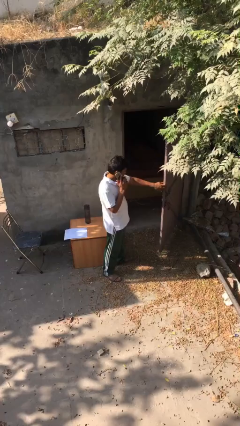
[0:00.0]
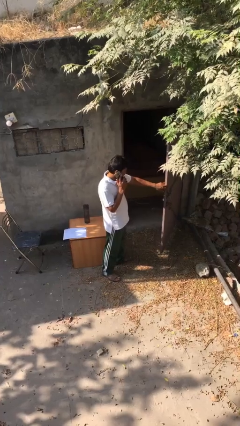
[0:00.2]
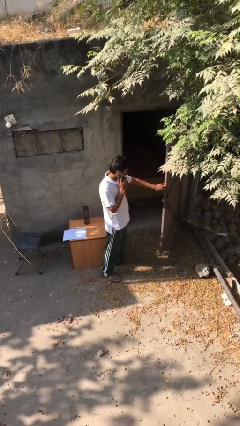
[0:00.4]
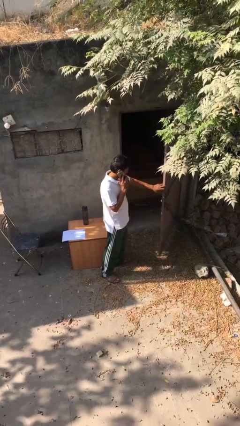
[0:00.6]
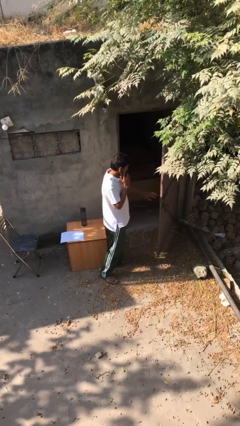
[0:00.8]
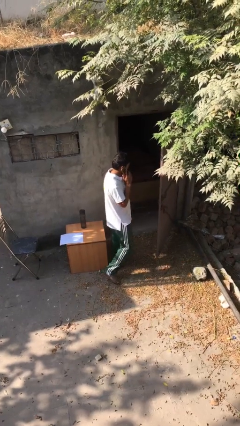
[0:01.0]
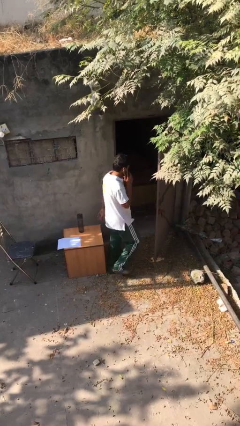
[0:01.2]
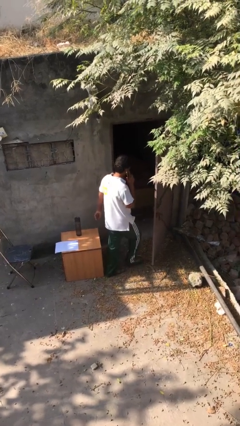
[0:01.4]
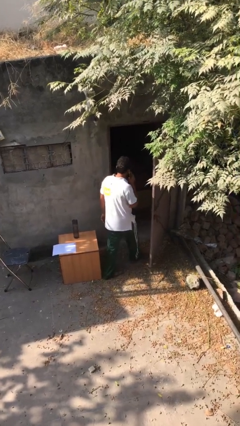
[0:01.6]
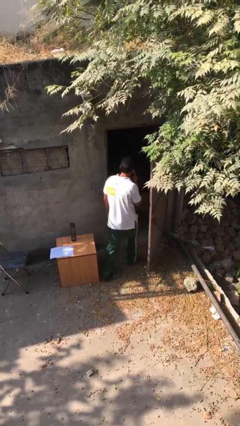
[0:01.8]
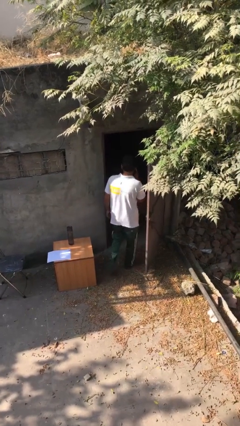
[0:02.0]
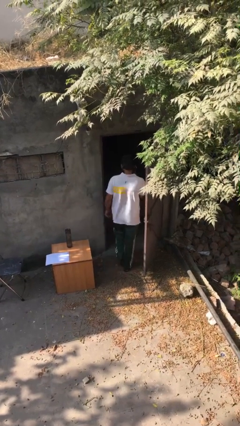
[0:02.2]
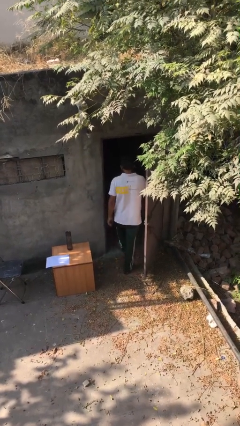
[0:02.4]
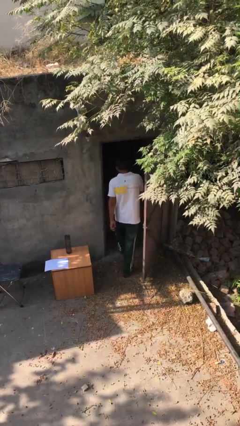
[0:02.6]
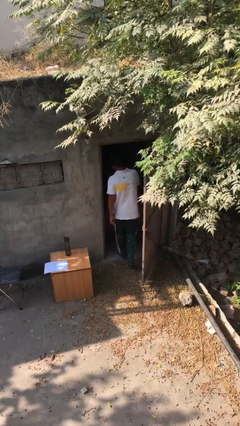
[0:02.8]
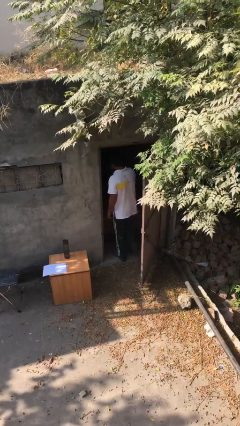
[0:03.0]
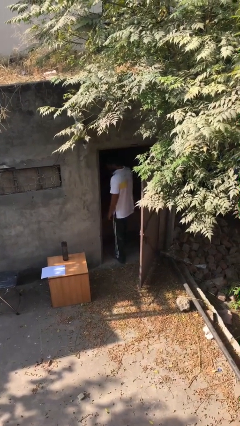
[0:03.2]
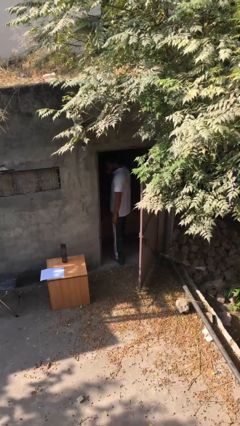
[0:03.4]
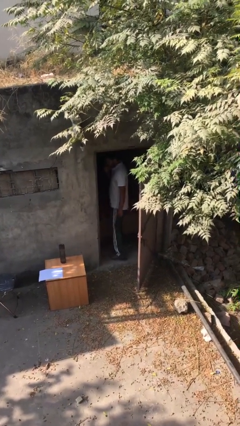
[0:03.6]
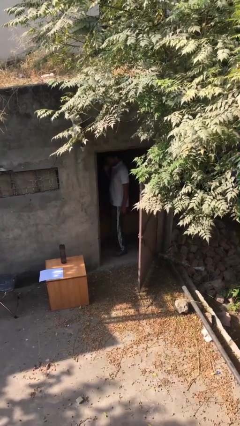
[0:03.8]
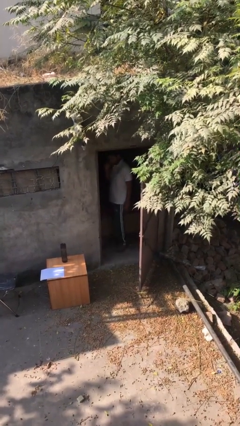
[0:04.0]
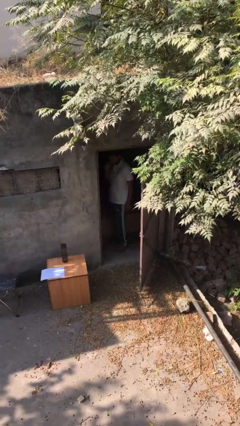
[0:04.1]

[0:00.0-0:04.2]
person exits scene through structure

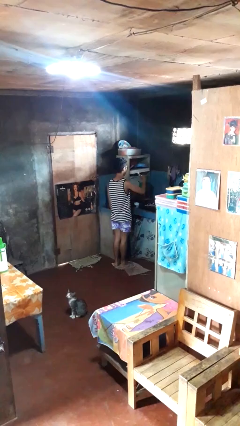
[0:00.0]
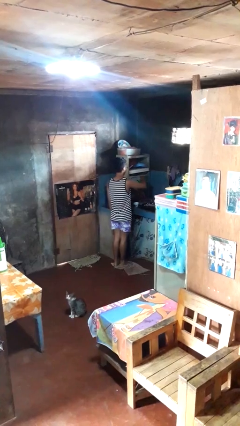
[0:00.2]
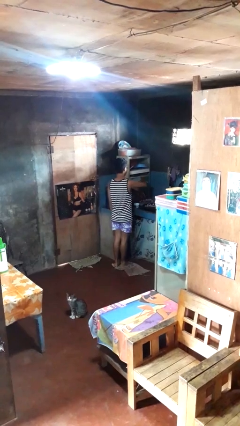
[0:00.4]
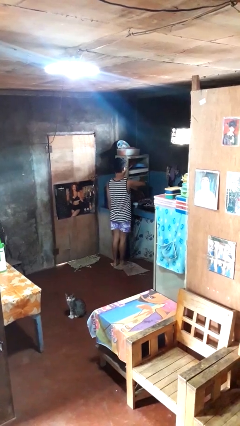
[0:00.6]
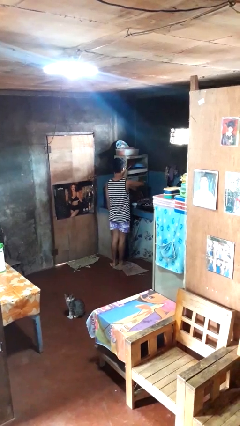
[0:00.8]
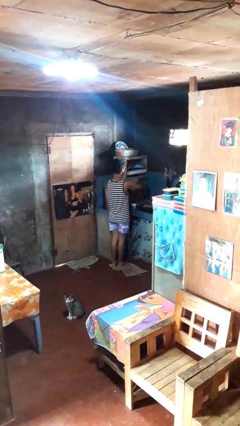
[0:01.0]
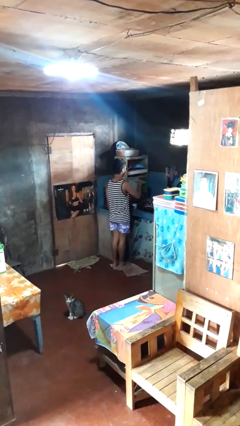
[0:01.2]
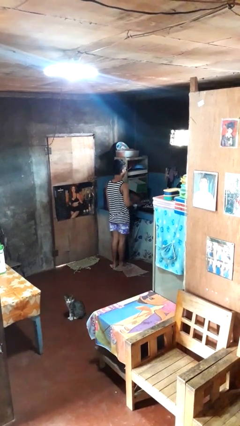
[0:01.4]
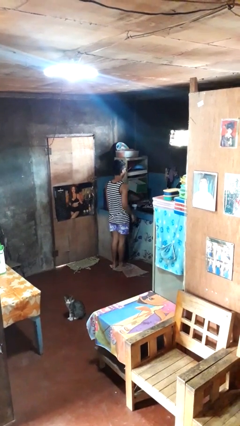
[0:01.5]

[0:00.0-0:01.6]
person puts object into kitchen drawer

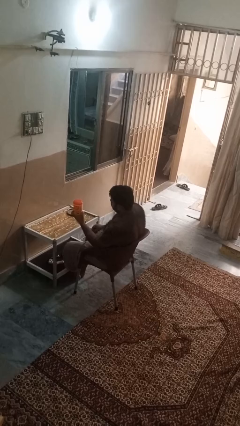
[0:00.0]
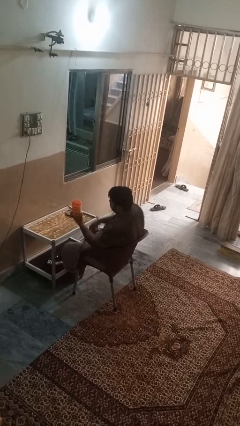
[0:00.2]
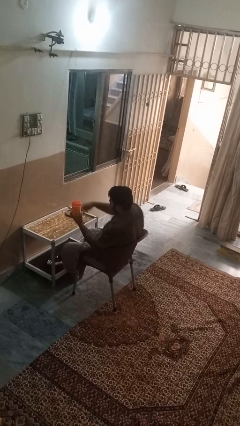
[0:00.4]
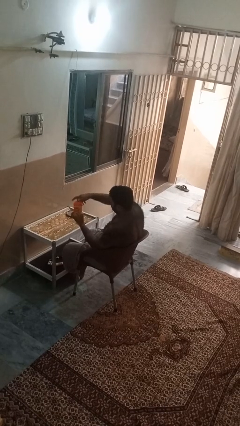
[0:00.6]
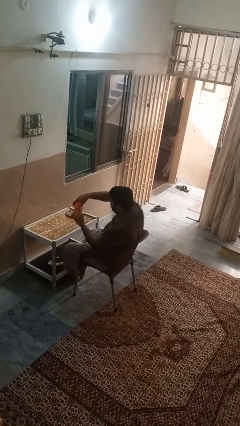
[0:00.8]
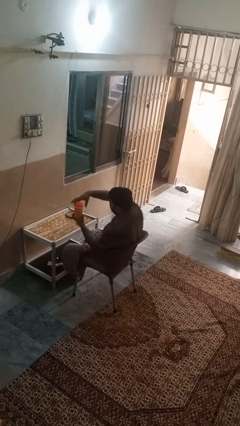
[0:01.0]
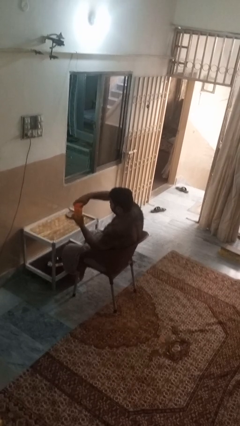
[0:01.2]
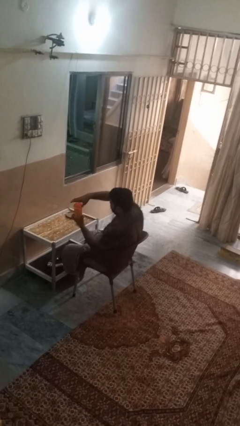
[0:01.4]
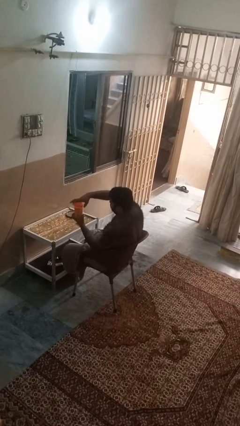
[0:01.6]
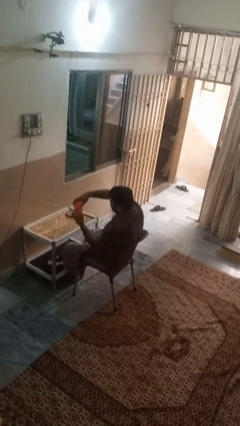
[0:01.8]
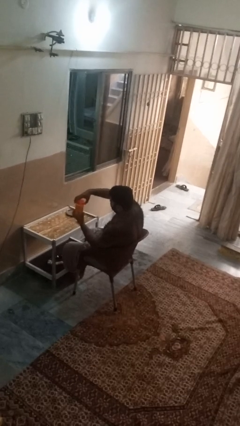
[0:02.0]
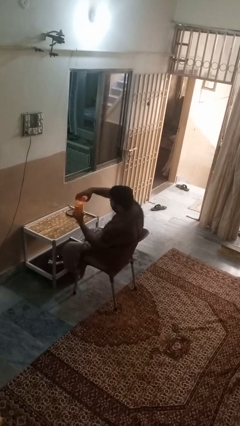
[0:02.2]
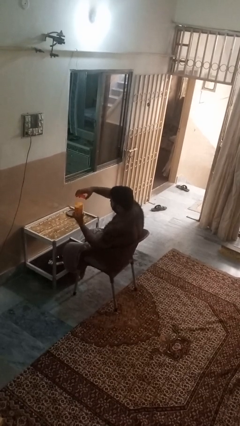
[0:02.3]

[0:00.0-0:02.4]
person opens jar

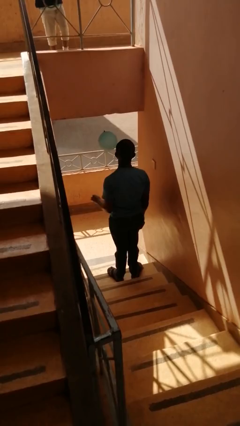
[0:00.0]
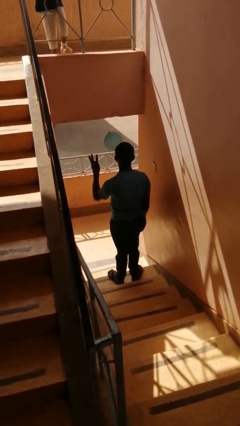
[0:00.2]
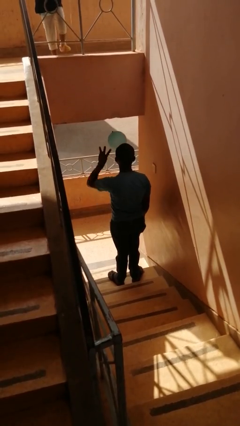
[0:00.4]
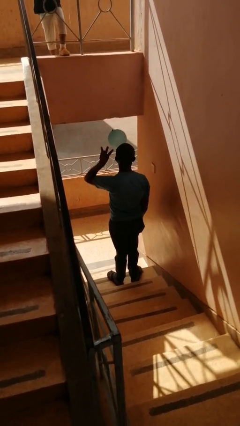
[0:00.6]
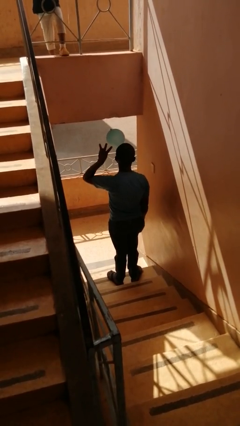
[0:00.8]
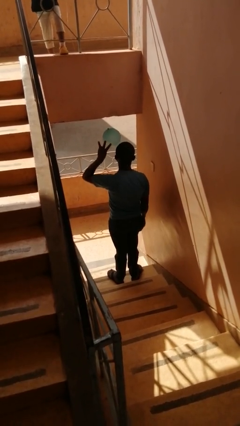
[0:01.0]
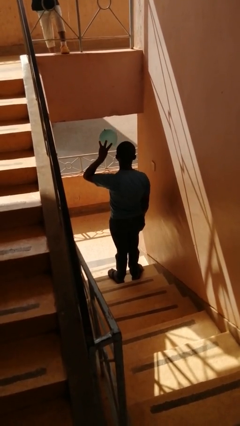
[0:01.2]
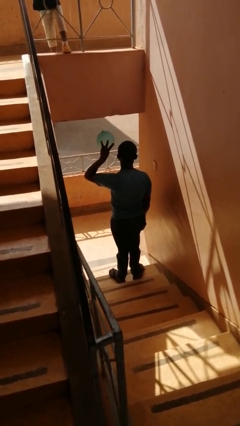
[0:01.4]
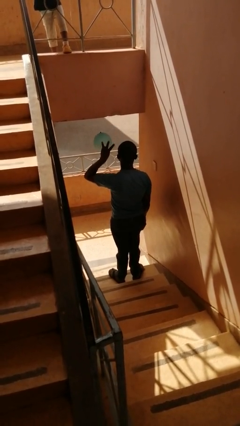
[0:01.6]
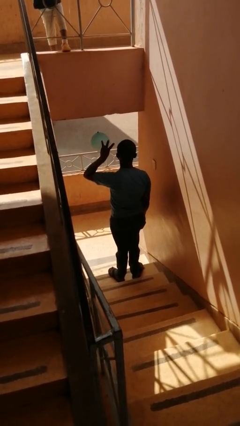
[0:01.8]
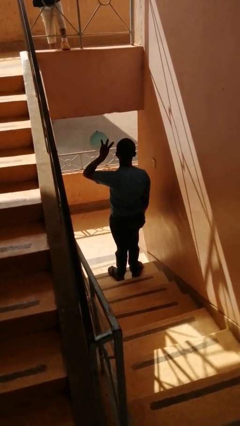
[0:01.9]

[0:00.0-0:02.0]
person gestures number three

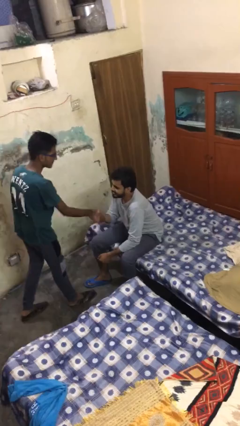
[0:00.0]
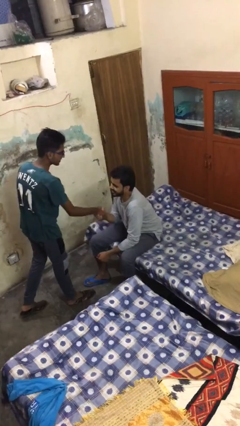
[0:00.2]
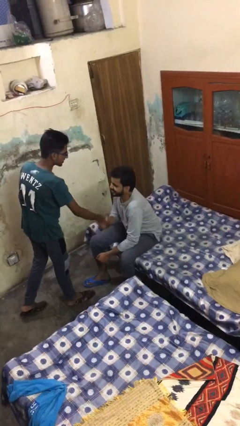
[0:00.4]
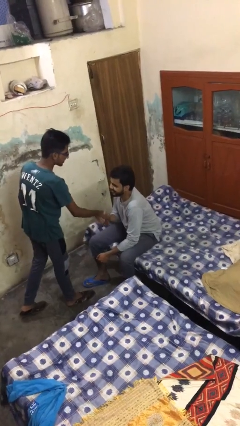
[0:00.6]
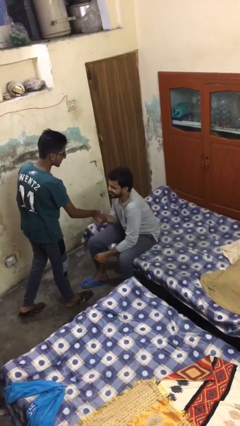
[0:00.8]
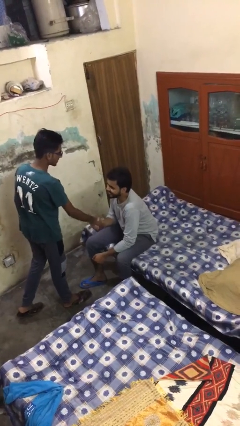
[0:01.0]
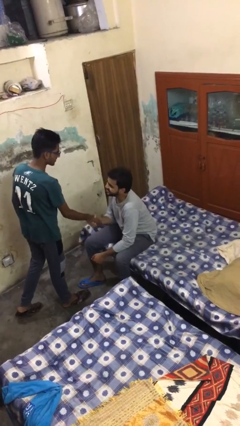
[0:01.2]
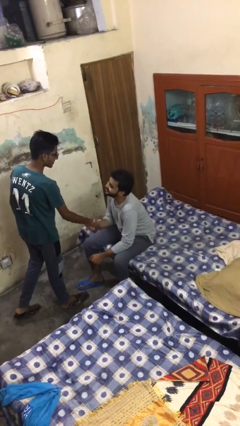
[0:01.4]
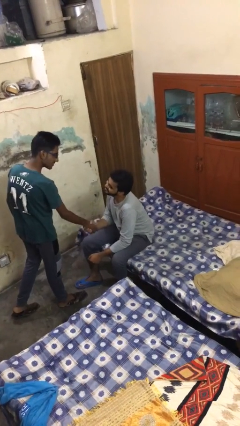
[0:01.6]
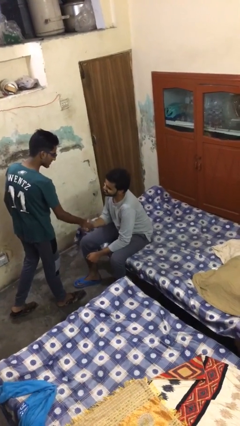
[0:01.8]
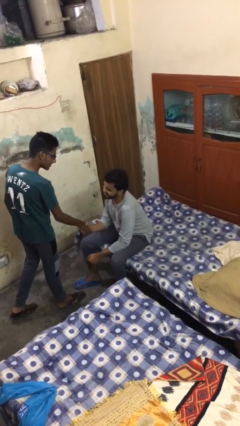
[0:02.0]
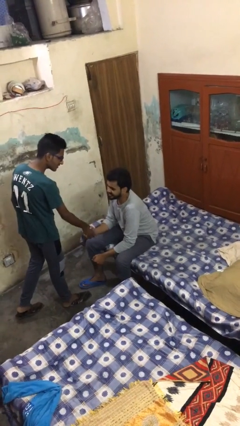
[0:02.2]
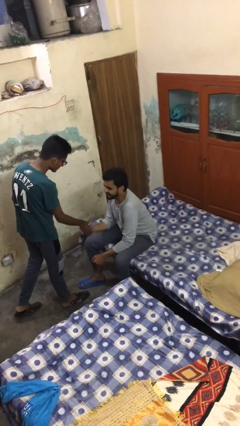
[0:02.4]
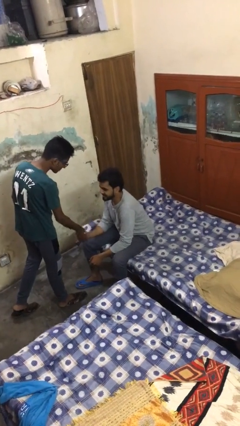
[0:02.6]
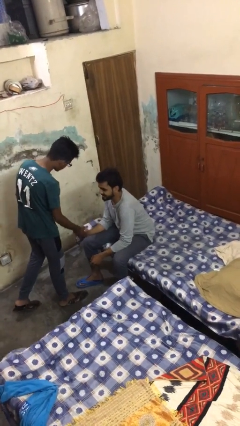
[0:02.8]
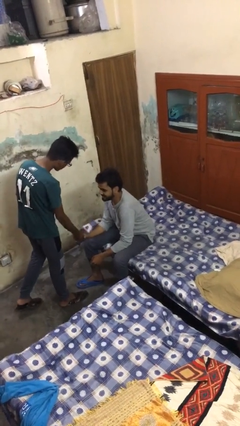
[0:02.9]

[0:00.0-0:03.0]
person shakes hand

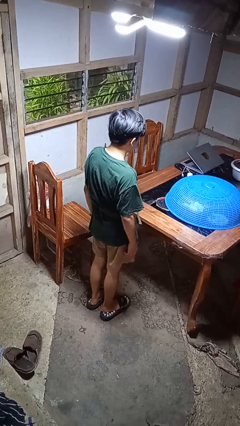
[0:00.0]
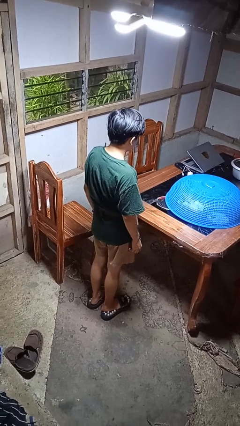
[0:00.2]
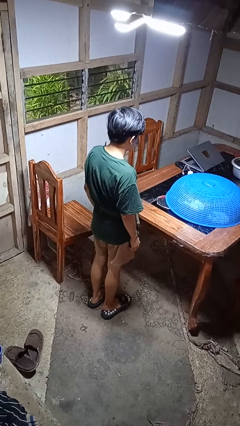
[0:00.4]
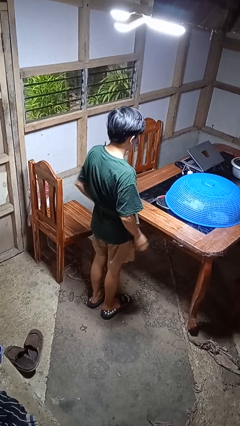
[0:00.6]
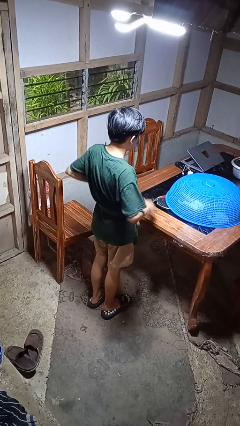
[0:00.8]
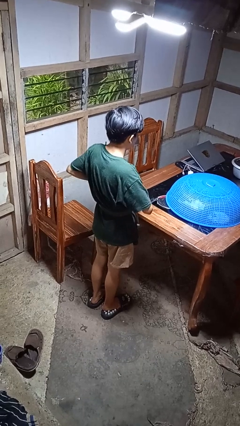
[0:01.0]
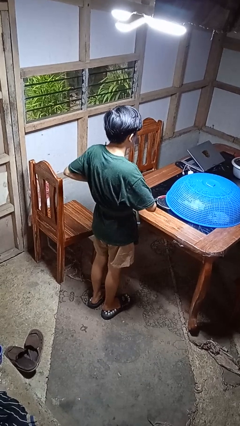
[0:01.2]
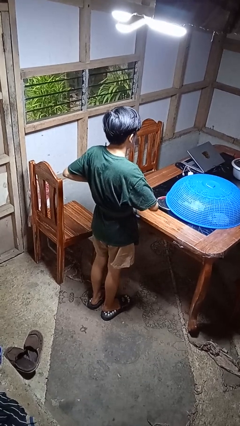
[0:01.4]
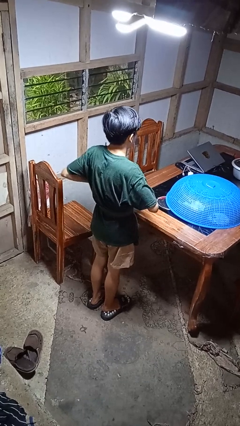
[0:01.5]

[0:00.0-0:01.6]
person takes off belt

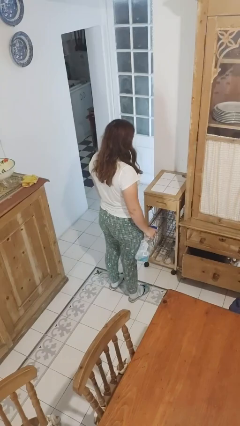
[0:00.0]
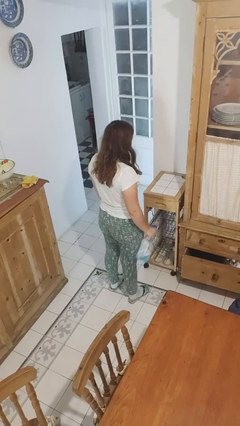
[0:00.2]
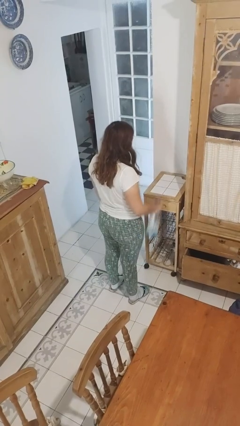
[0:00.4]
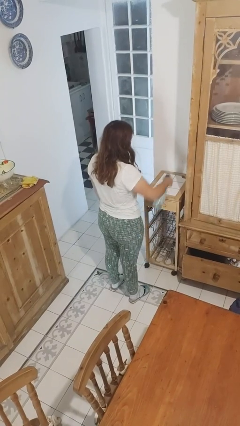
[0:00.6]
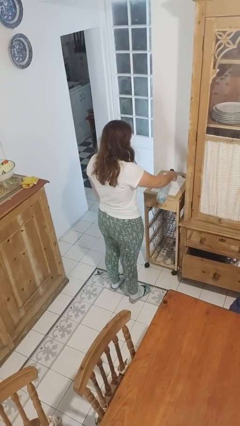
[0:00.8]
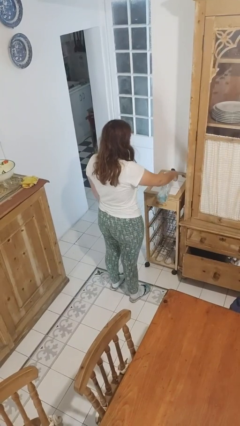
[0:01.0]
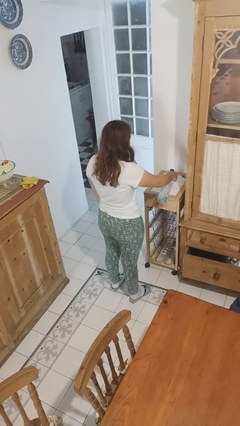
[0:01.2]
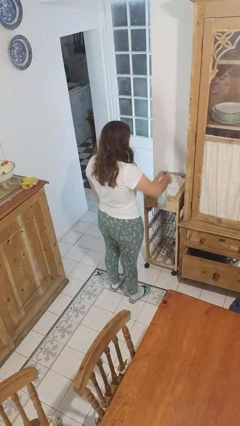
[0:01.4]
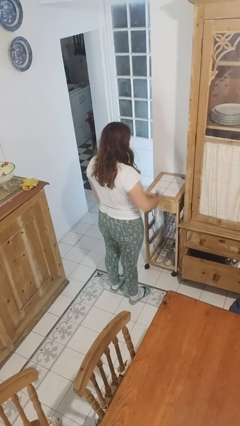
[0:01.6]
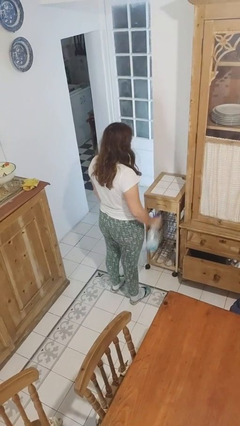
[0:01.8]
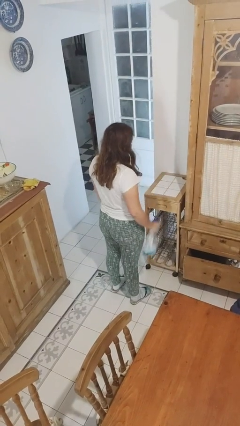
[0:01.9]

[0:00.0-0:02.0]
person sprays from bottle

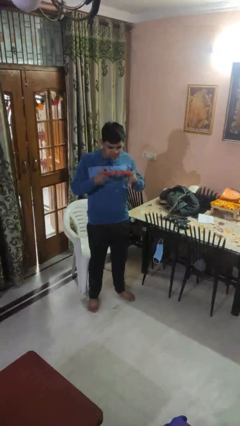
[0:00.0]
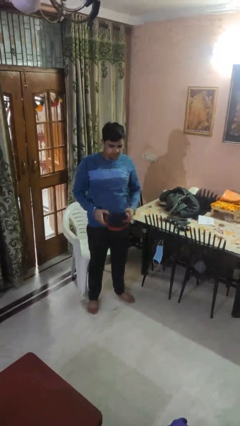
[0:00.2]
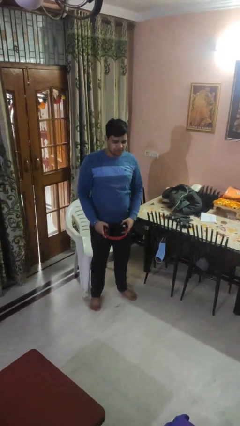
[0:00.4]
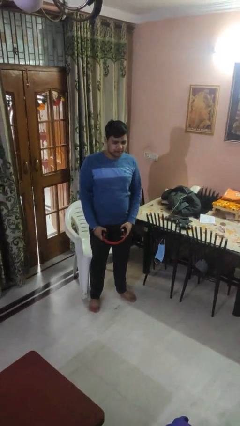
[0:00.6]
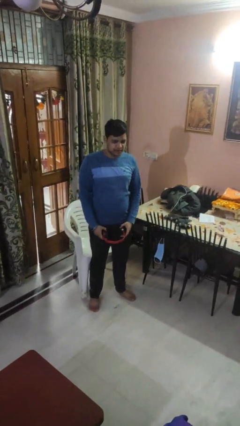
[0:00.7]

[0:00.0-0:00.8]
person takes off headphones
